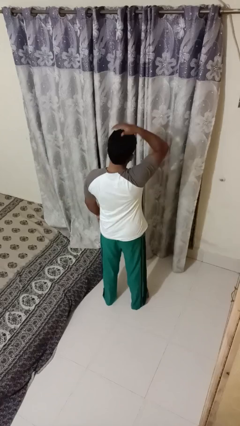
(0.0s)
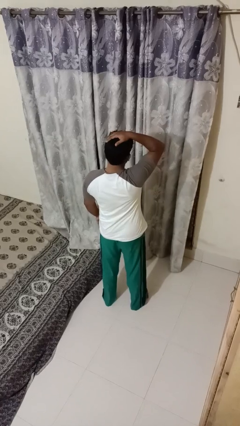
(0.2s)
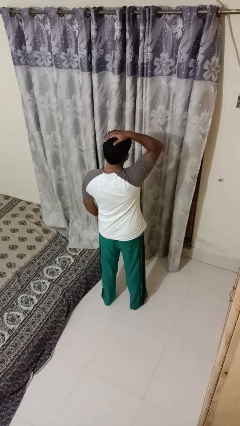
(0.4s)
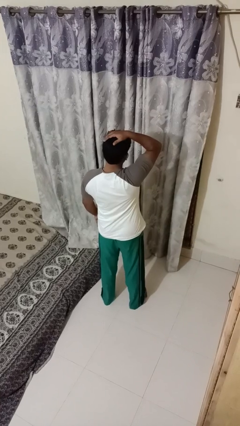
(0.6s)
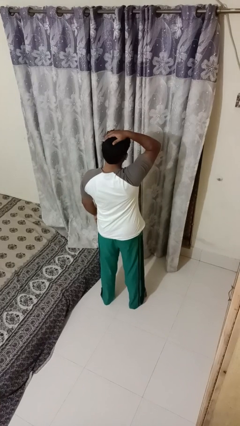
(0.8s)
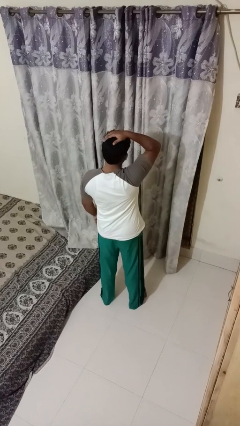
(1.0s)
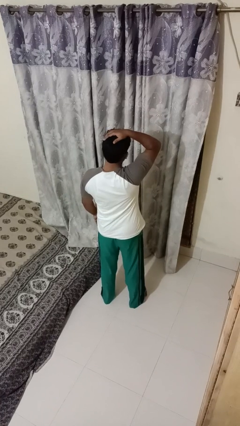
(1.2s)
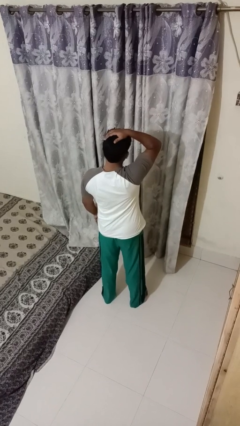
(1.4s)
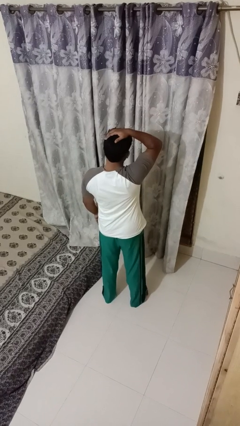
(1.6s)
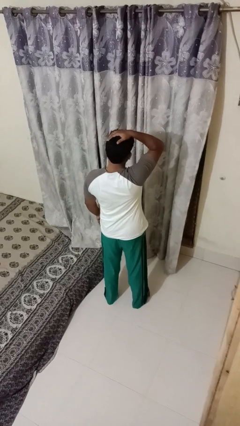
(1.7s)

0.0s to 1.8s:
person pats head

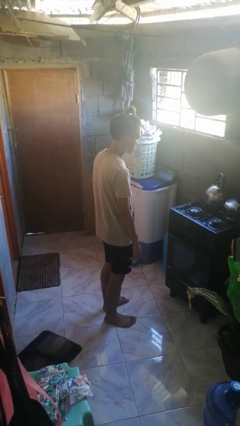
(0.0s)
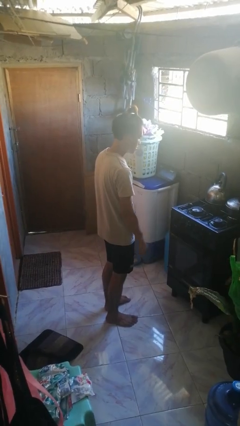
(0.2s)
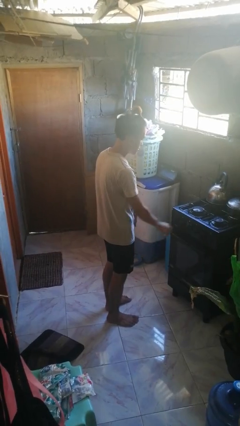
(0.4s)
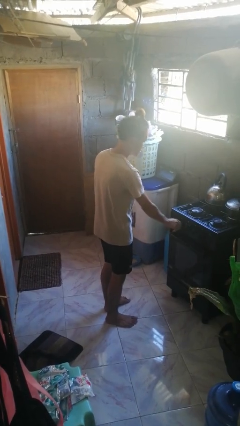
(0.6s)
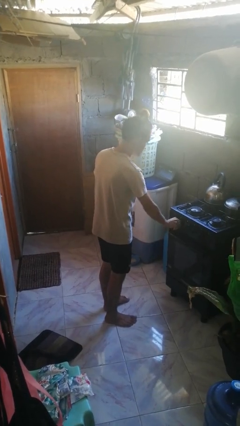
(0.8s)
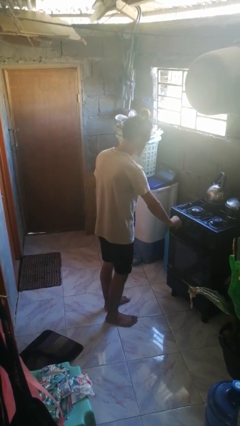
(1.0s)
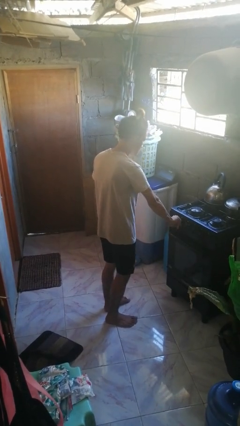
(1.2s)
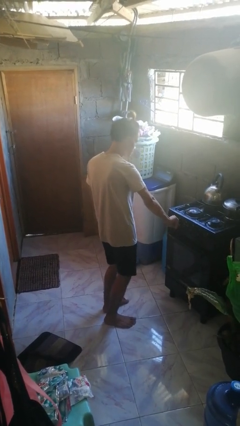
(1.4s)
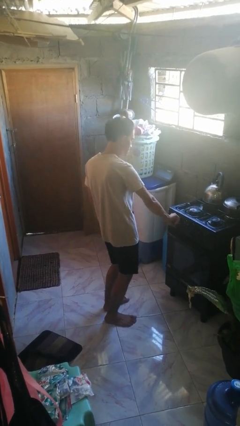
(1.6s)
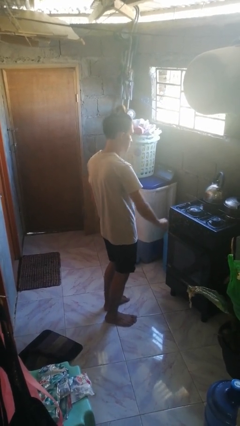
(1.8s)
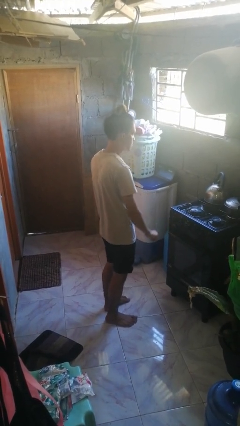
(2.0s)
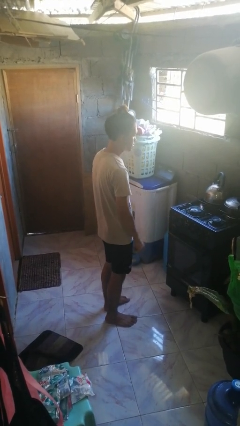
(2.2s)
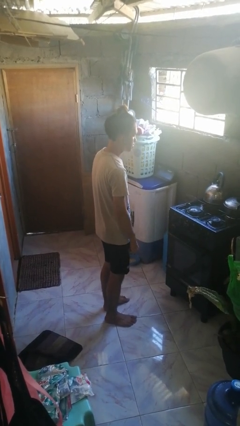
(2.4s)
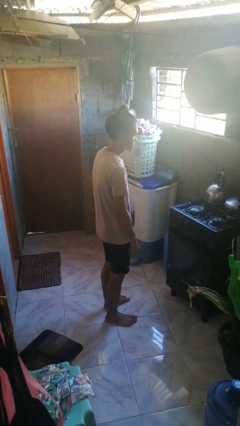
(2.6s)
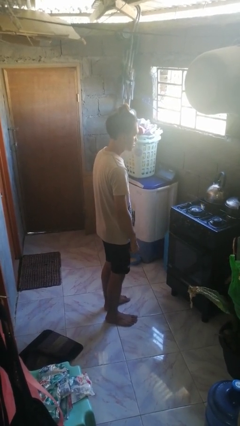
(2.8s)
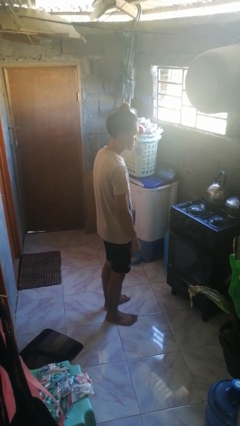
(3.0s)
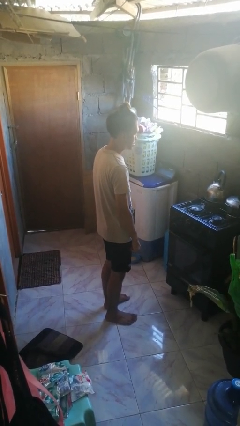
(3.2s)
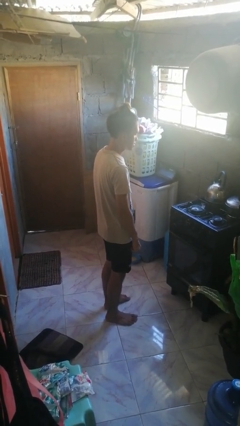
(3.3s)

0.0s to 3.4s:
person turns on stovetop

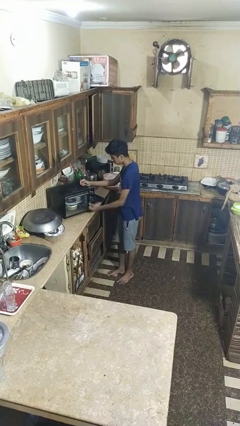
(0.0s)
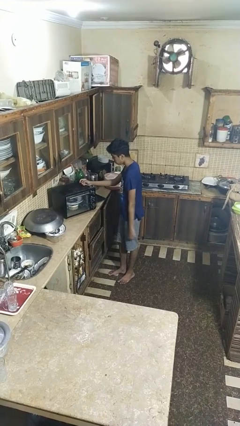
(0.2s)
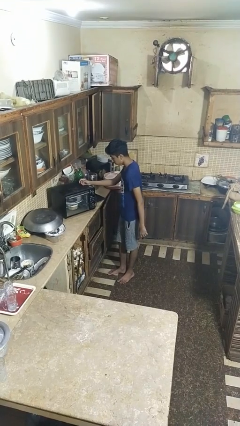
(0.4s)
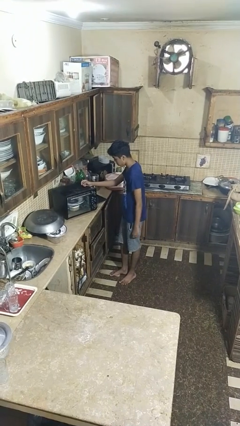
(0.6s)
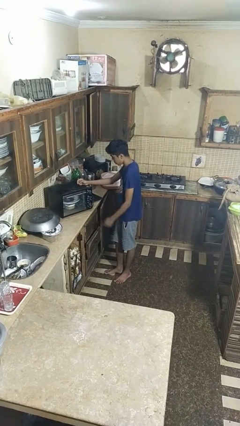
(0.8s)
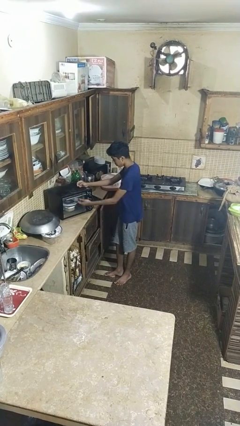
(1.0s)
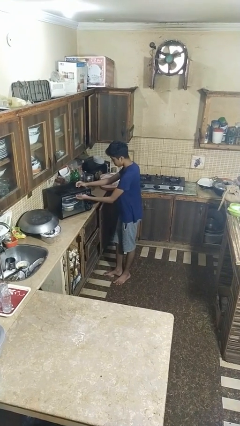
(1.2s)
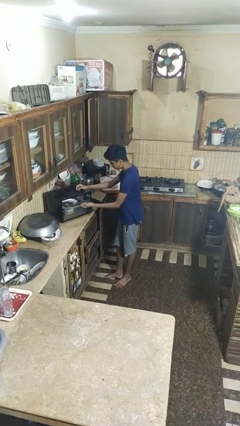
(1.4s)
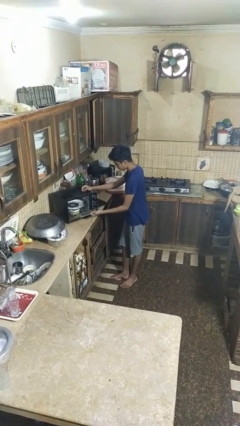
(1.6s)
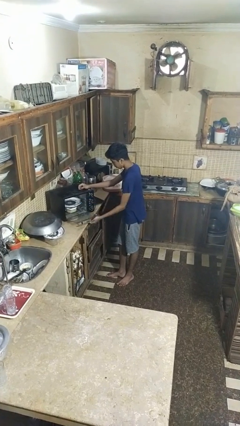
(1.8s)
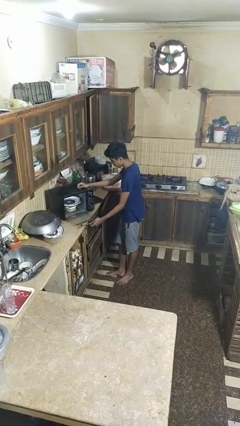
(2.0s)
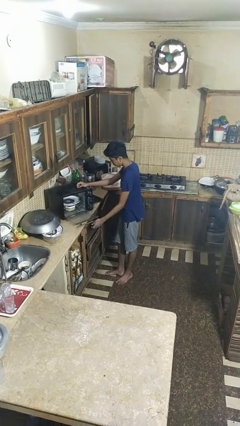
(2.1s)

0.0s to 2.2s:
person opens dishwasher

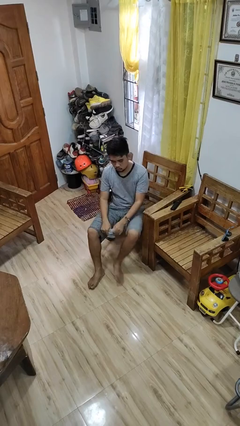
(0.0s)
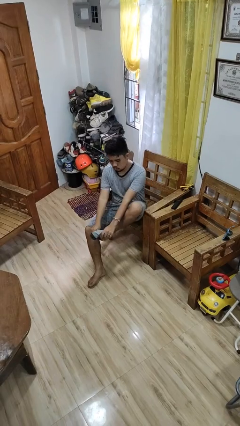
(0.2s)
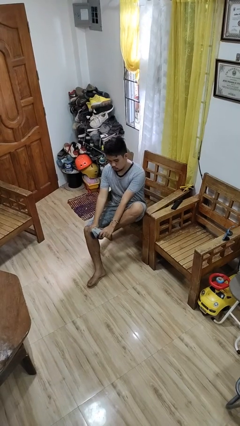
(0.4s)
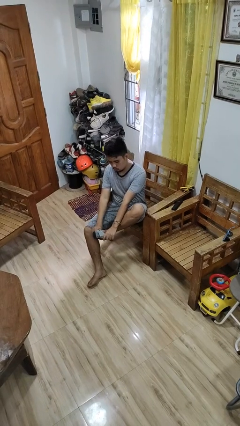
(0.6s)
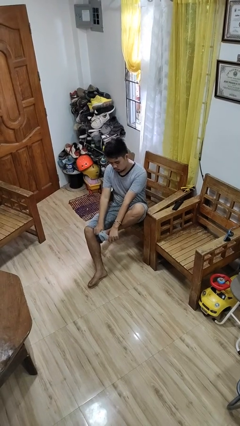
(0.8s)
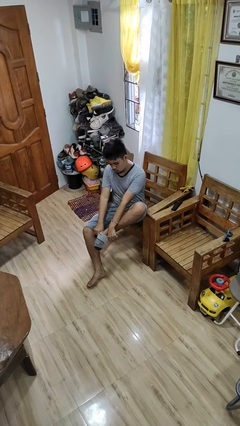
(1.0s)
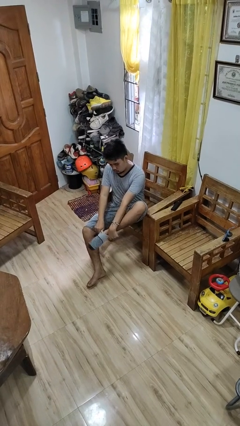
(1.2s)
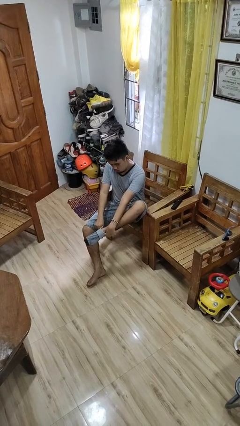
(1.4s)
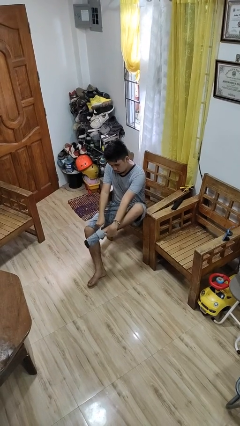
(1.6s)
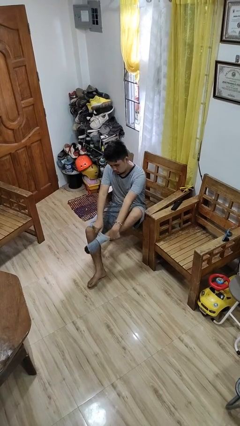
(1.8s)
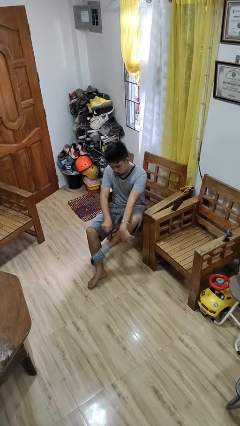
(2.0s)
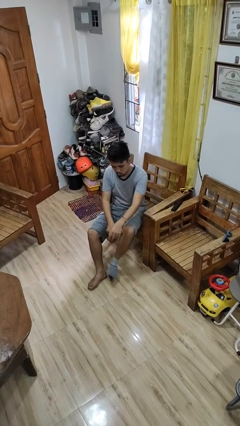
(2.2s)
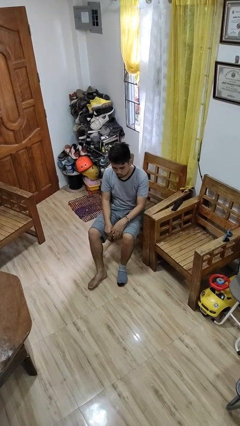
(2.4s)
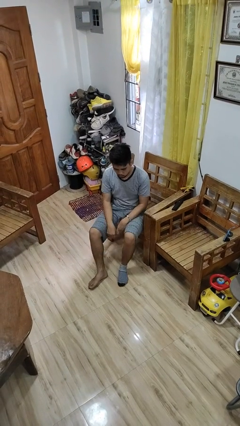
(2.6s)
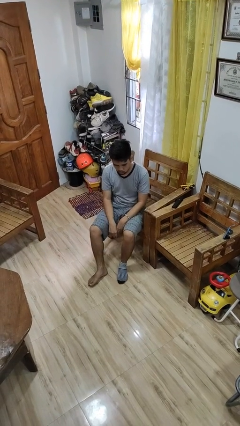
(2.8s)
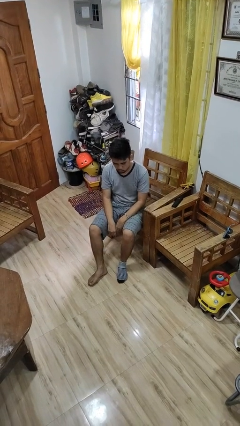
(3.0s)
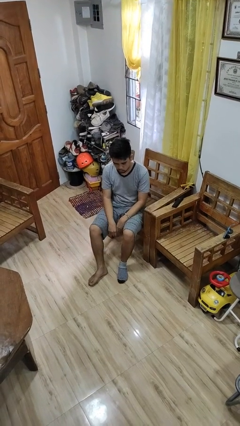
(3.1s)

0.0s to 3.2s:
person puts on socks

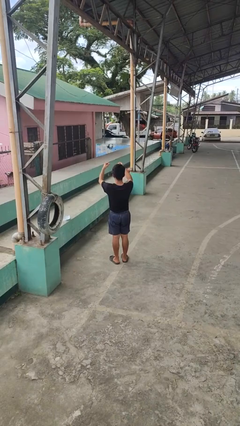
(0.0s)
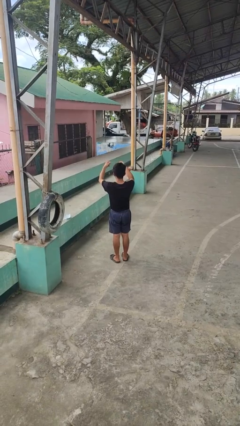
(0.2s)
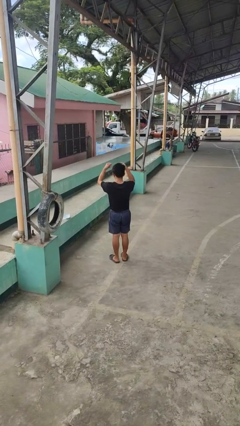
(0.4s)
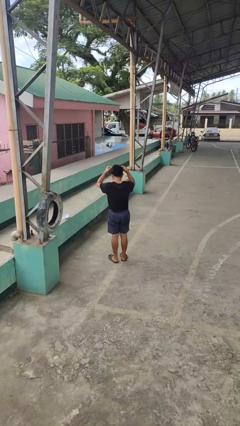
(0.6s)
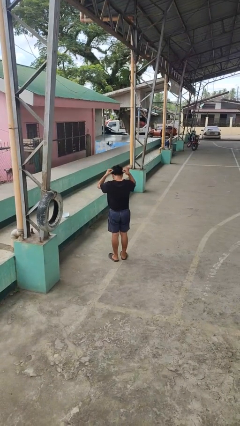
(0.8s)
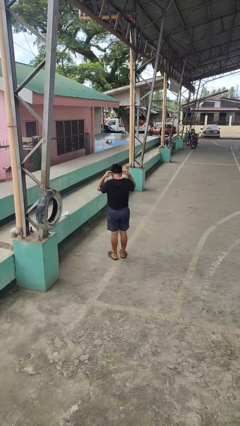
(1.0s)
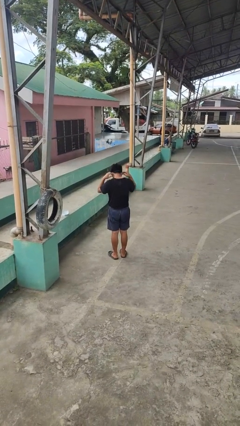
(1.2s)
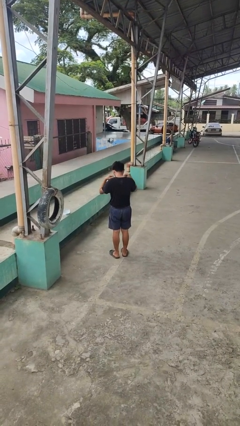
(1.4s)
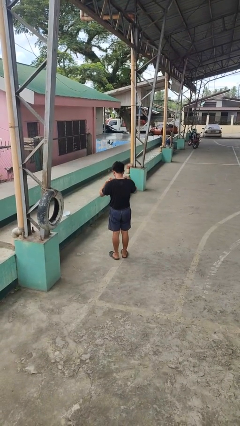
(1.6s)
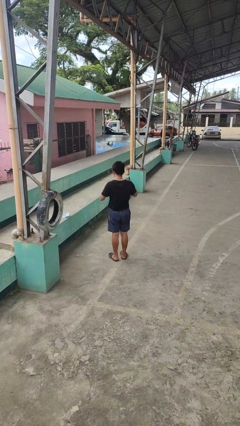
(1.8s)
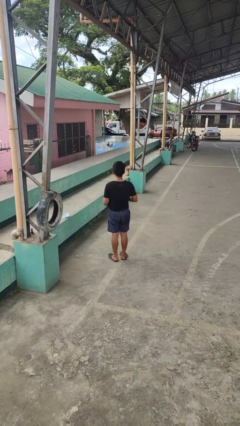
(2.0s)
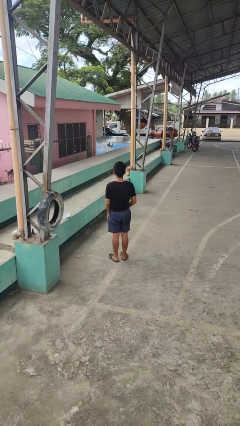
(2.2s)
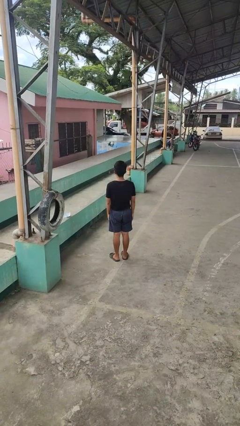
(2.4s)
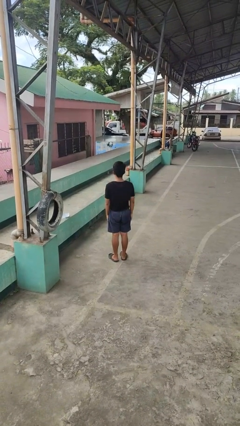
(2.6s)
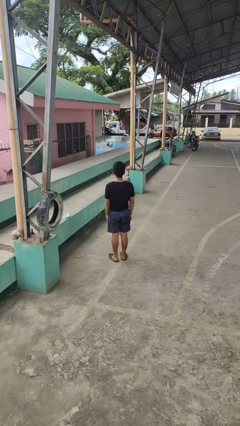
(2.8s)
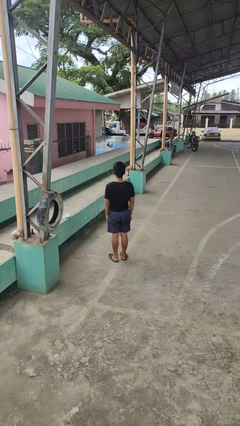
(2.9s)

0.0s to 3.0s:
person puts on necklace

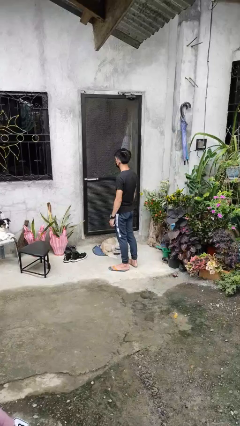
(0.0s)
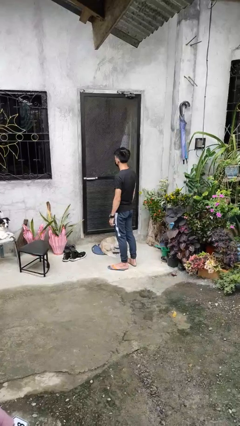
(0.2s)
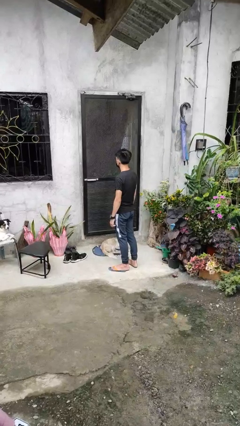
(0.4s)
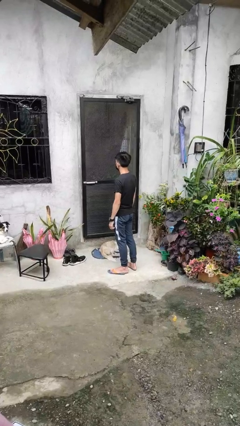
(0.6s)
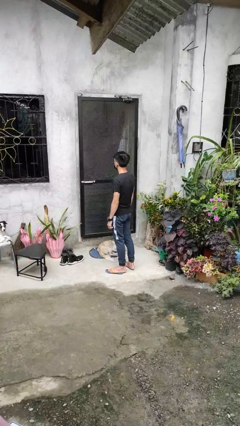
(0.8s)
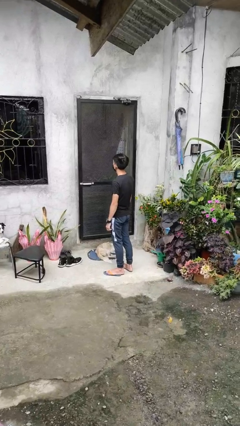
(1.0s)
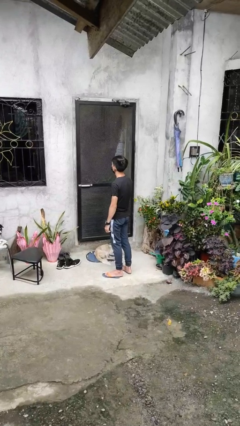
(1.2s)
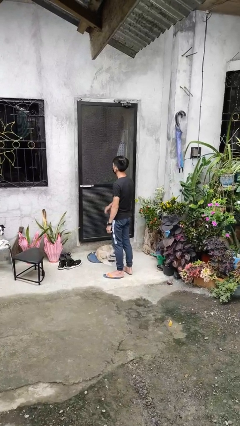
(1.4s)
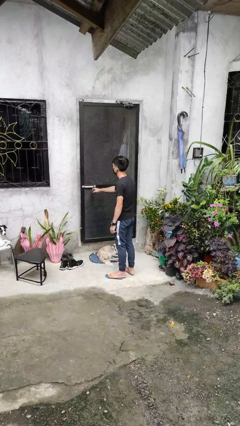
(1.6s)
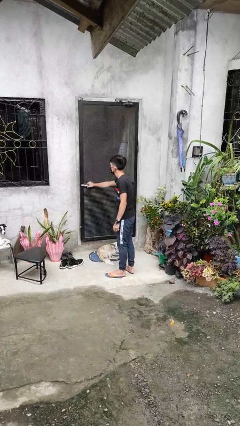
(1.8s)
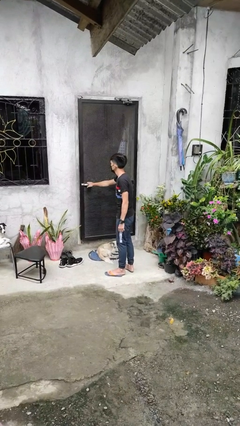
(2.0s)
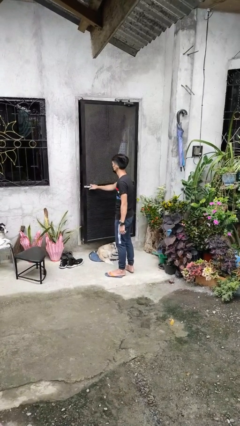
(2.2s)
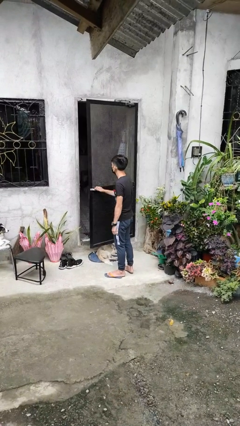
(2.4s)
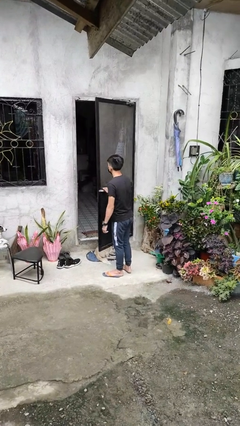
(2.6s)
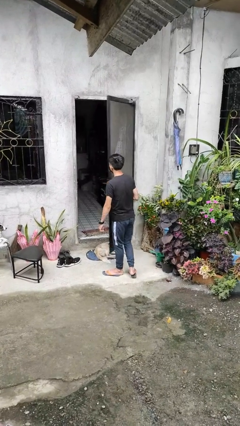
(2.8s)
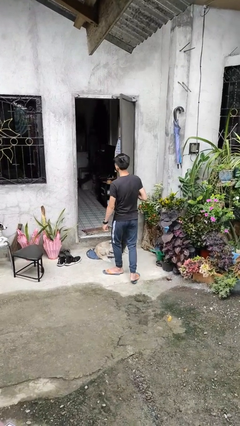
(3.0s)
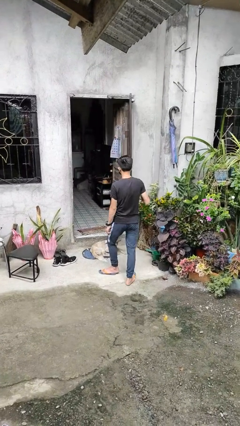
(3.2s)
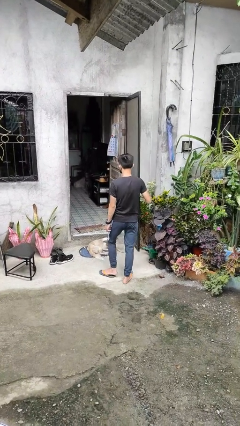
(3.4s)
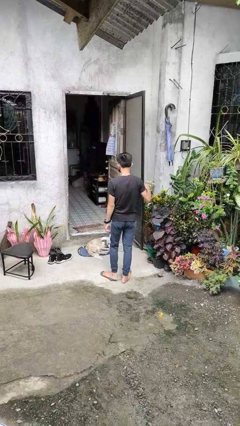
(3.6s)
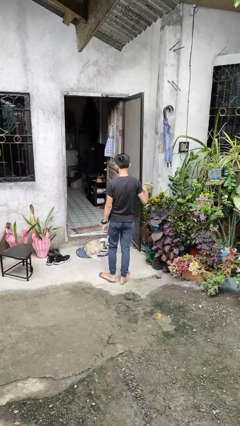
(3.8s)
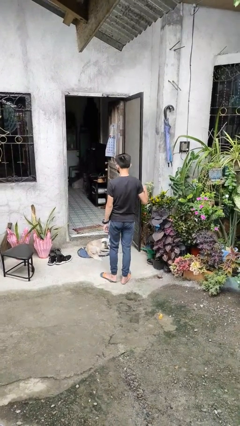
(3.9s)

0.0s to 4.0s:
person opens facility door
